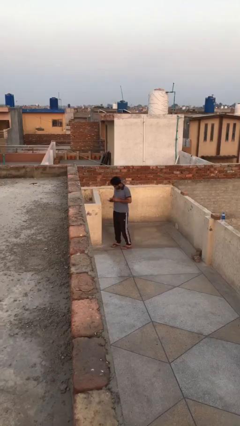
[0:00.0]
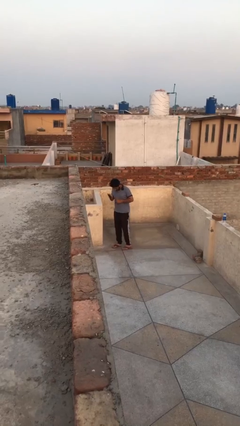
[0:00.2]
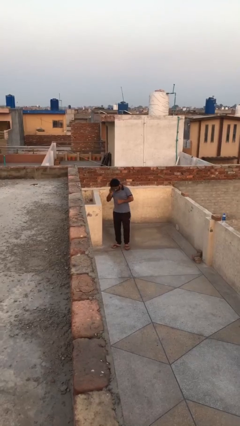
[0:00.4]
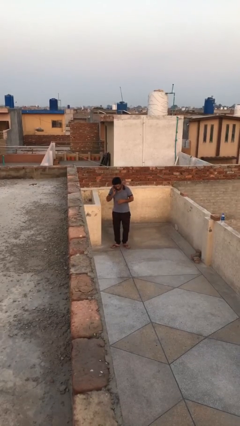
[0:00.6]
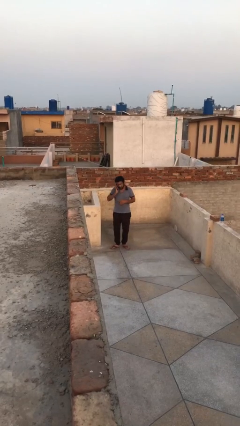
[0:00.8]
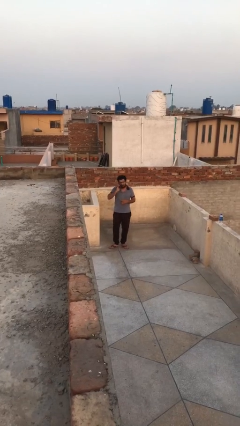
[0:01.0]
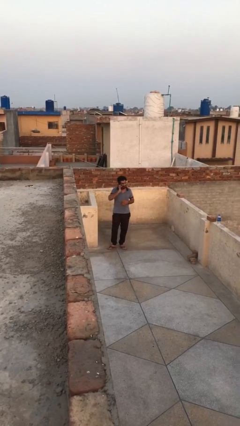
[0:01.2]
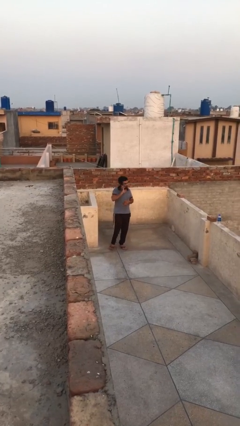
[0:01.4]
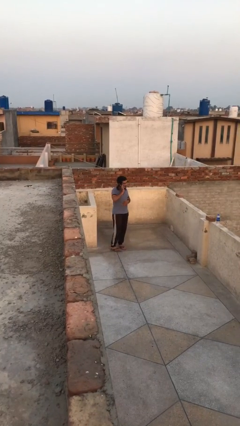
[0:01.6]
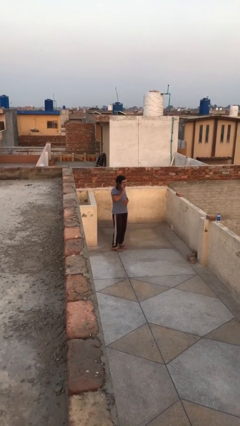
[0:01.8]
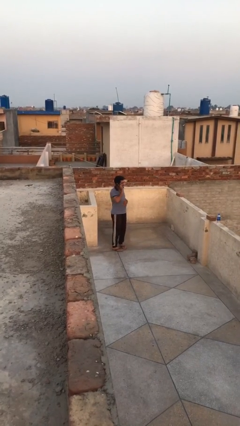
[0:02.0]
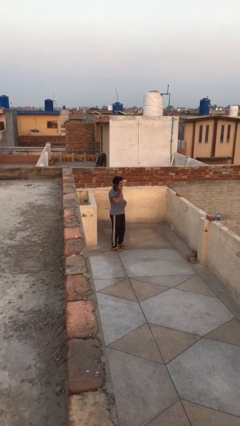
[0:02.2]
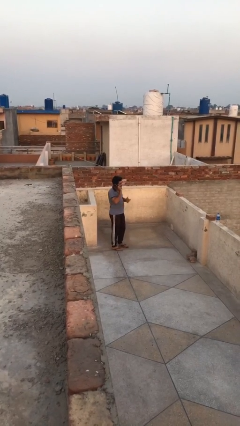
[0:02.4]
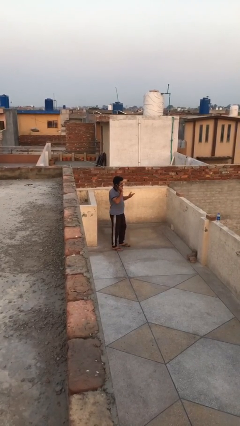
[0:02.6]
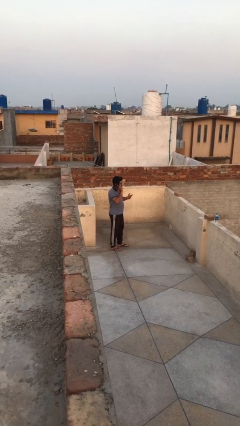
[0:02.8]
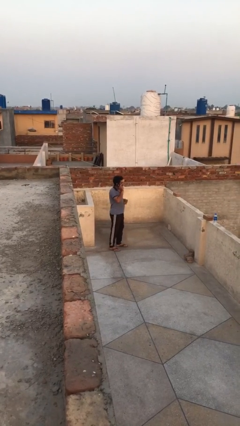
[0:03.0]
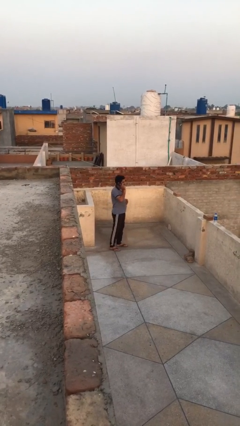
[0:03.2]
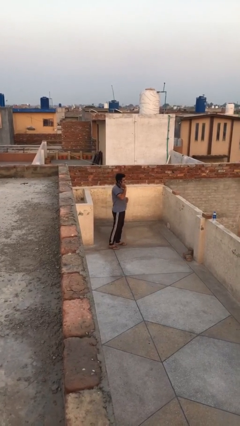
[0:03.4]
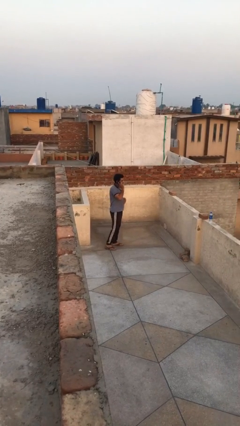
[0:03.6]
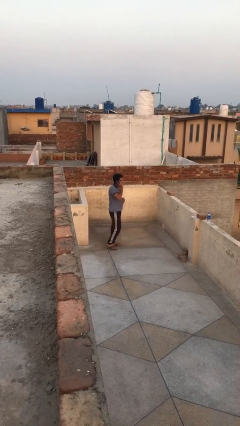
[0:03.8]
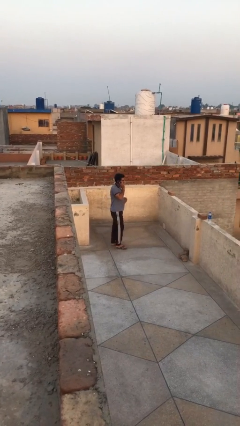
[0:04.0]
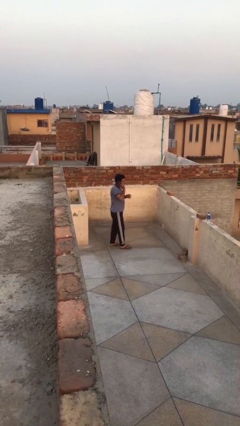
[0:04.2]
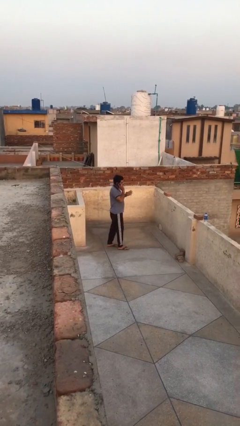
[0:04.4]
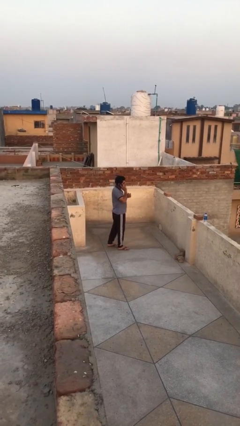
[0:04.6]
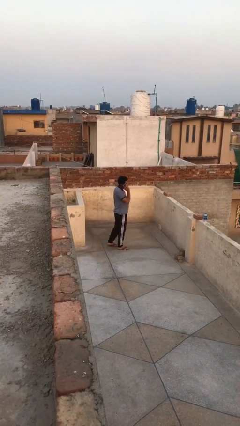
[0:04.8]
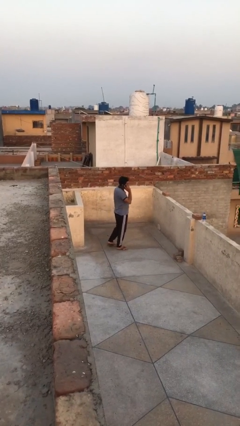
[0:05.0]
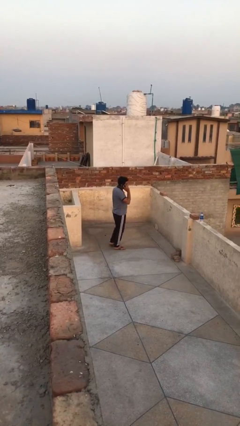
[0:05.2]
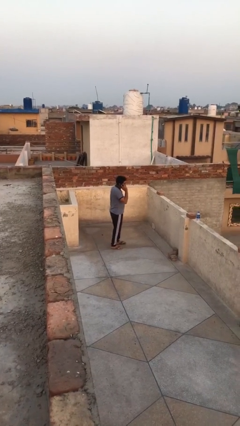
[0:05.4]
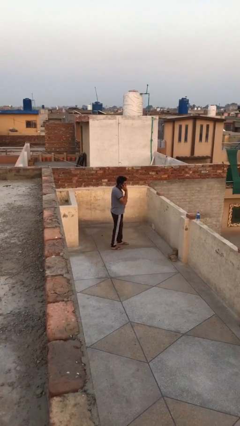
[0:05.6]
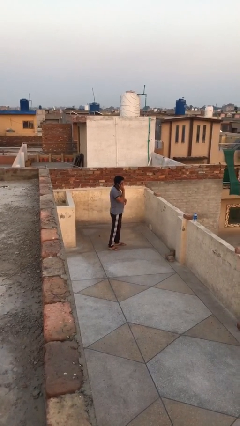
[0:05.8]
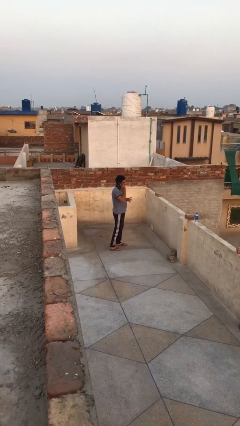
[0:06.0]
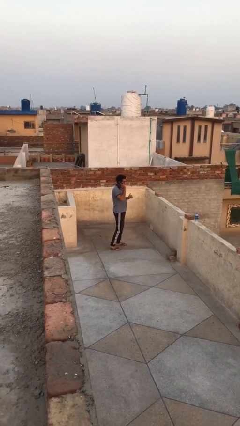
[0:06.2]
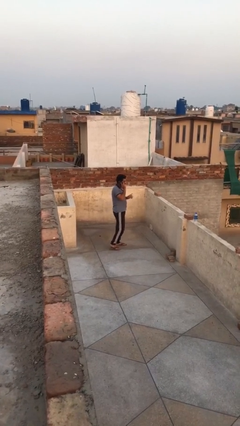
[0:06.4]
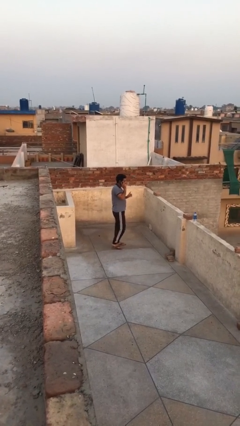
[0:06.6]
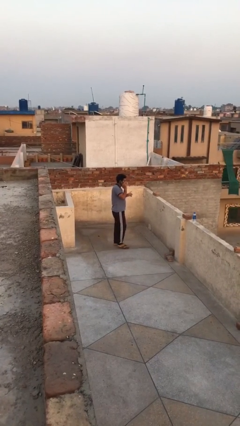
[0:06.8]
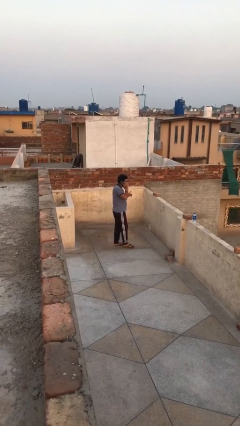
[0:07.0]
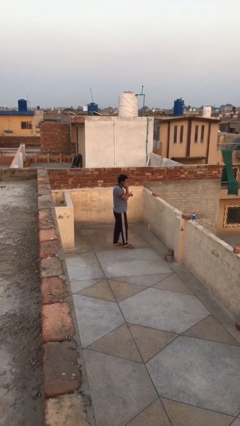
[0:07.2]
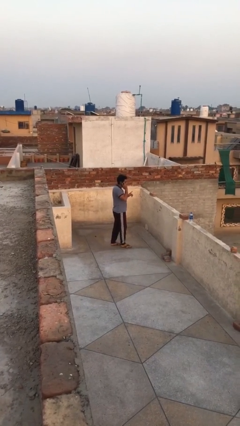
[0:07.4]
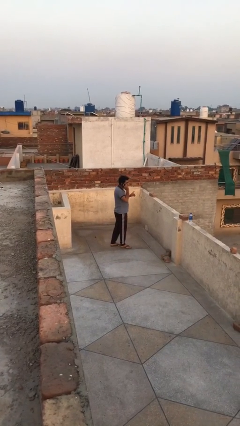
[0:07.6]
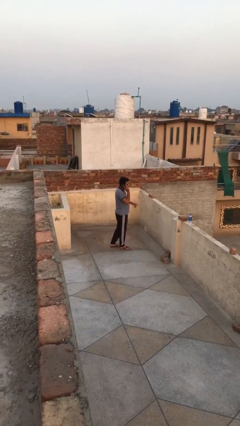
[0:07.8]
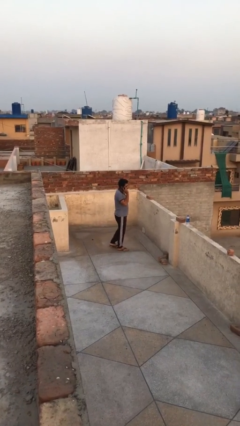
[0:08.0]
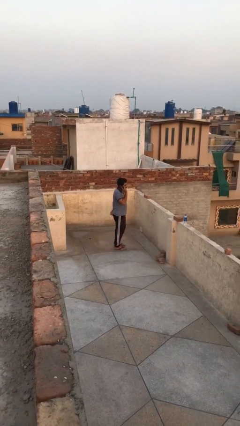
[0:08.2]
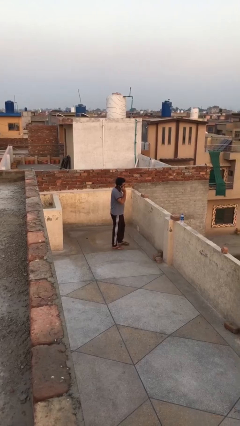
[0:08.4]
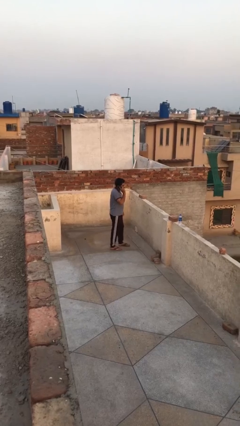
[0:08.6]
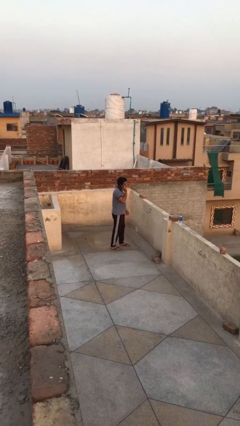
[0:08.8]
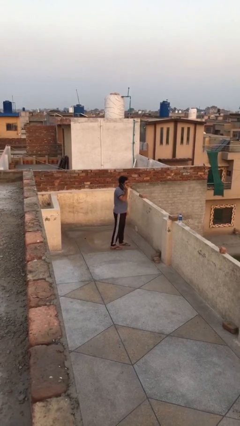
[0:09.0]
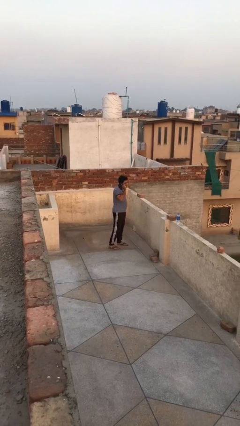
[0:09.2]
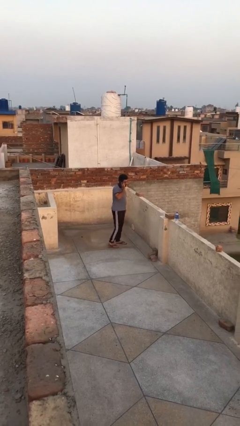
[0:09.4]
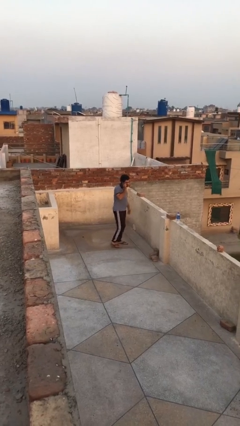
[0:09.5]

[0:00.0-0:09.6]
person talks on phone

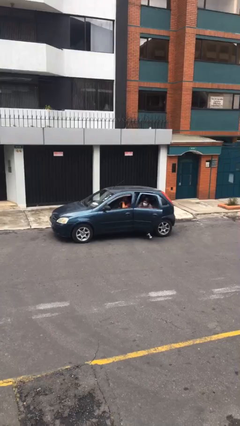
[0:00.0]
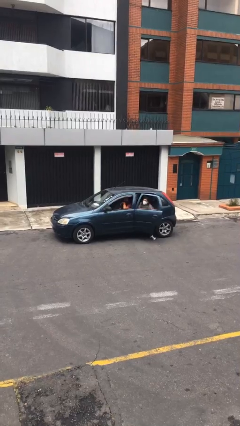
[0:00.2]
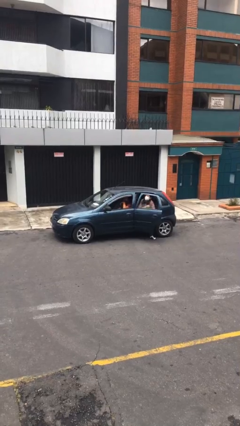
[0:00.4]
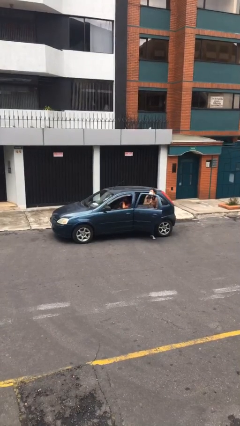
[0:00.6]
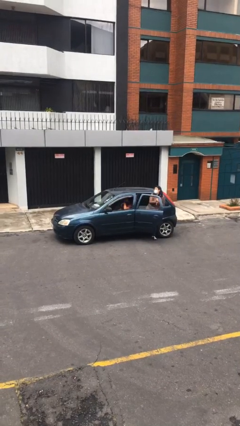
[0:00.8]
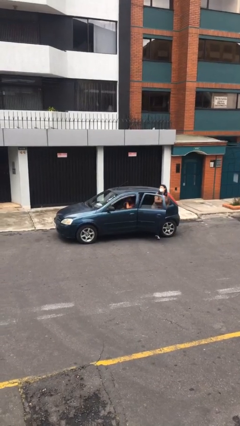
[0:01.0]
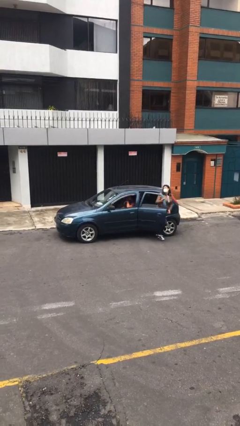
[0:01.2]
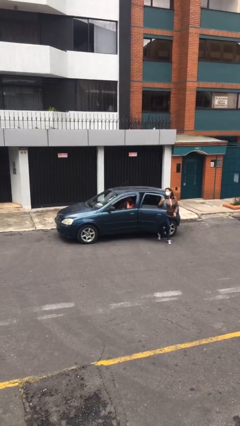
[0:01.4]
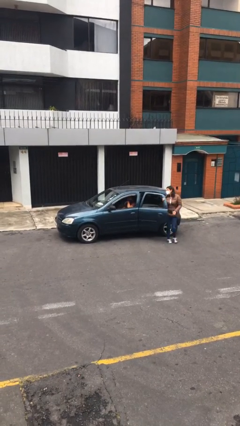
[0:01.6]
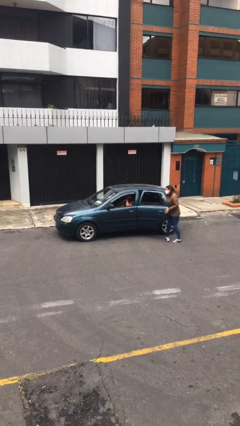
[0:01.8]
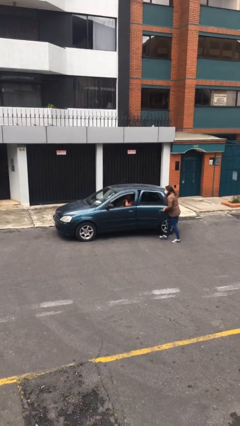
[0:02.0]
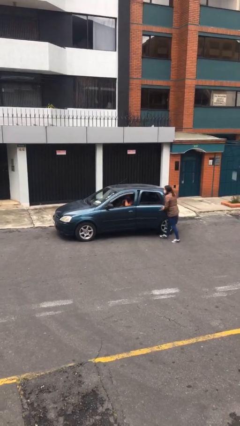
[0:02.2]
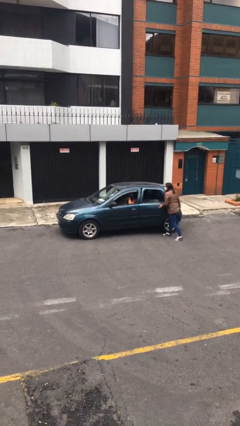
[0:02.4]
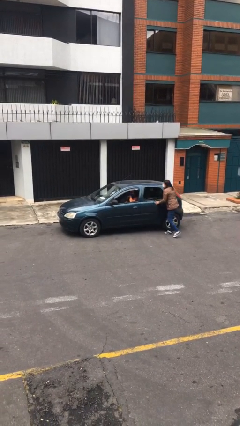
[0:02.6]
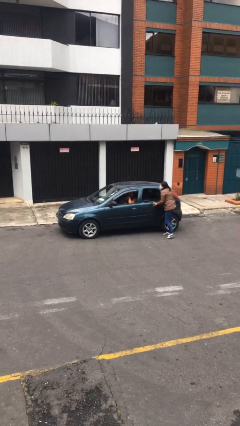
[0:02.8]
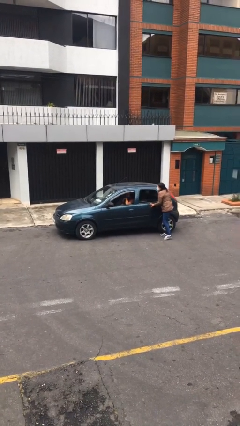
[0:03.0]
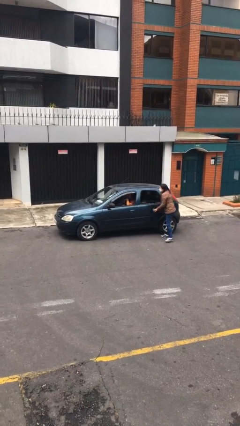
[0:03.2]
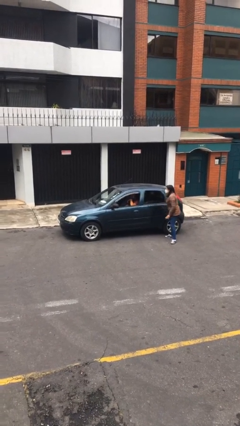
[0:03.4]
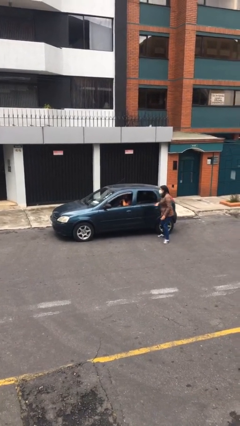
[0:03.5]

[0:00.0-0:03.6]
car drops off person

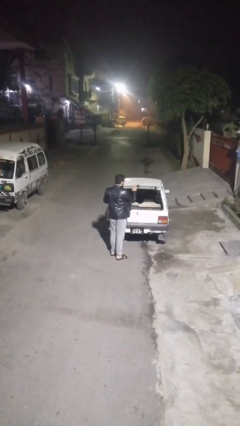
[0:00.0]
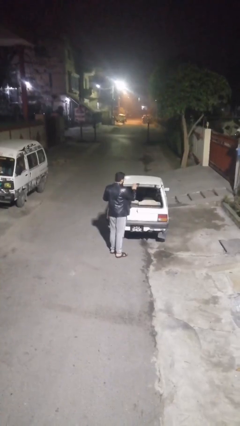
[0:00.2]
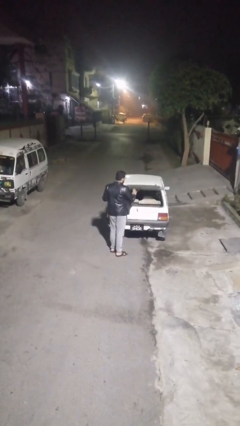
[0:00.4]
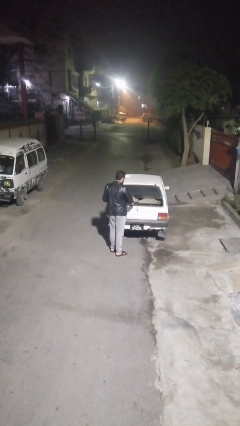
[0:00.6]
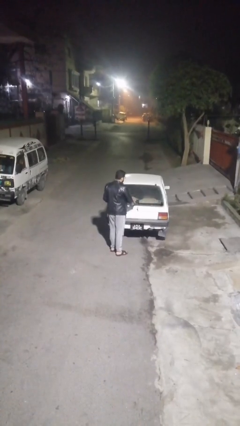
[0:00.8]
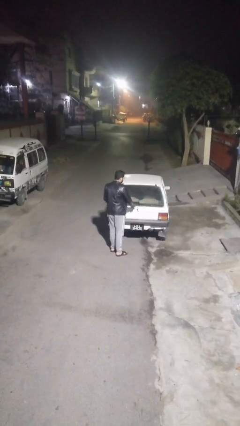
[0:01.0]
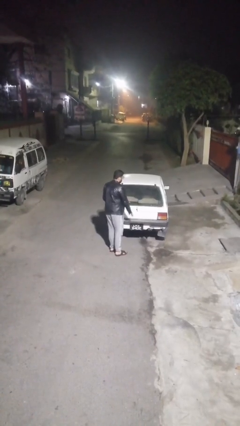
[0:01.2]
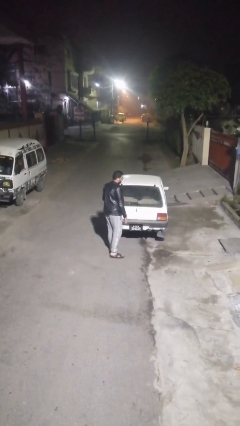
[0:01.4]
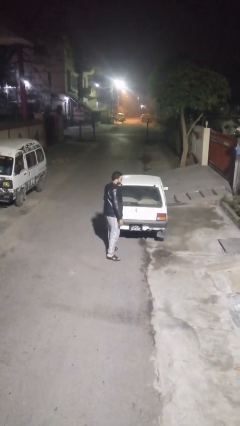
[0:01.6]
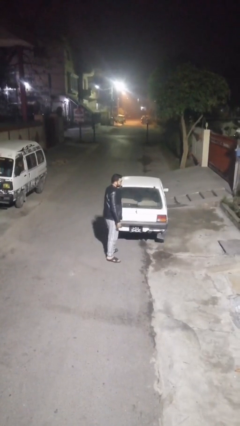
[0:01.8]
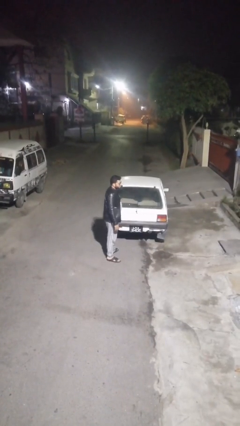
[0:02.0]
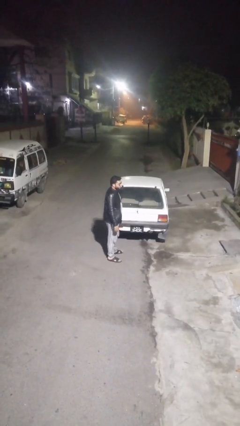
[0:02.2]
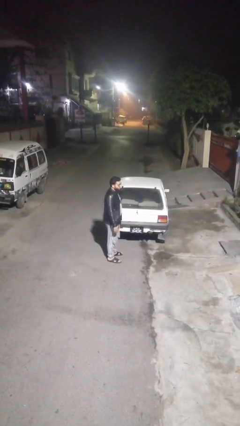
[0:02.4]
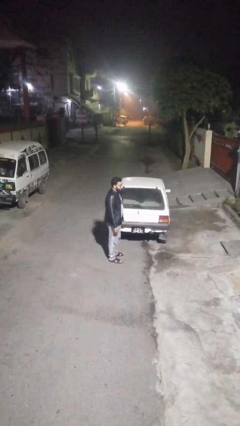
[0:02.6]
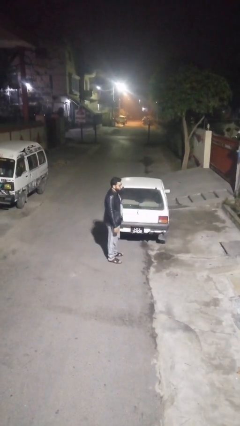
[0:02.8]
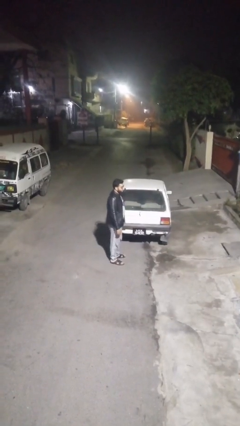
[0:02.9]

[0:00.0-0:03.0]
person closes car trunk

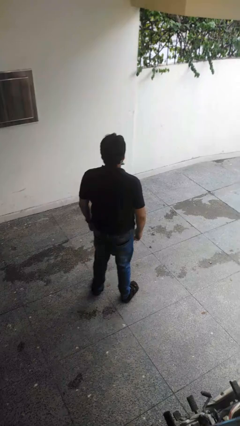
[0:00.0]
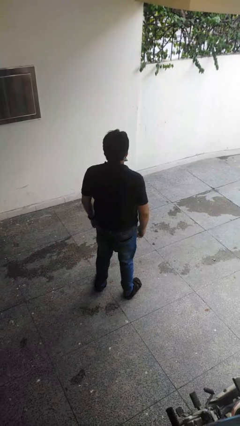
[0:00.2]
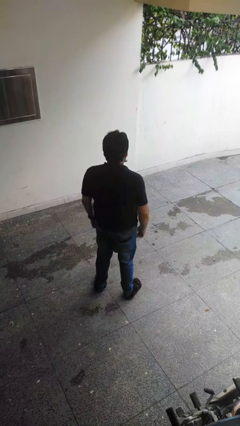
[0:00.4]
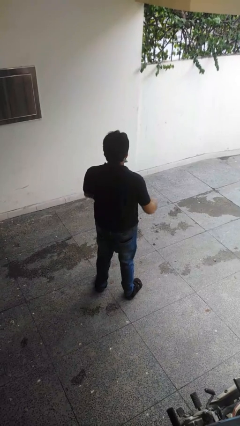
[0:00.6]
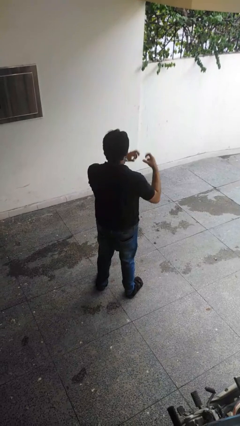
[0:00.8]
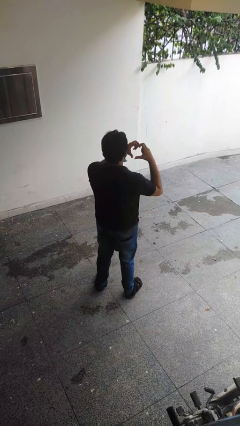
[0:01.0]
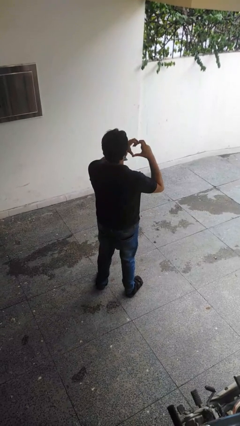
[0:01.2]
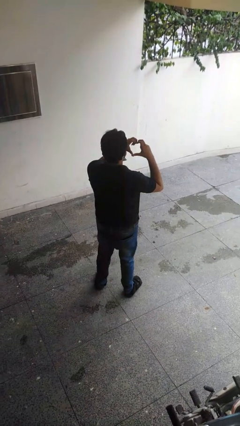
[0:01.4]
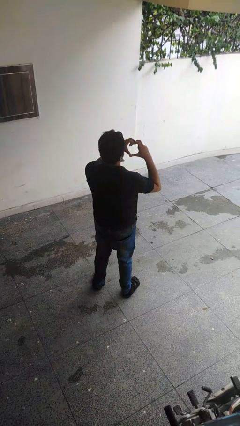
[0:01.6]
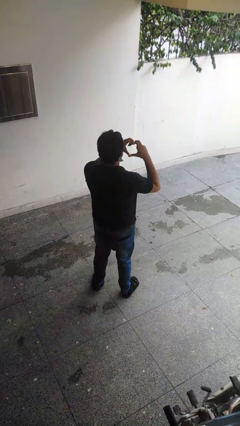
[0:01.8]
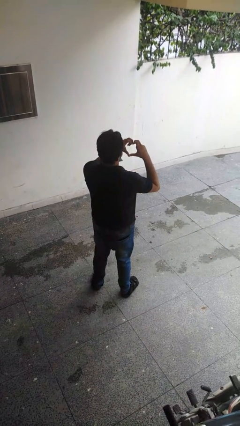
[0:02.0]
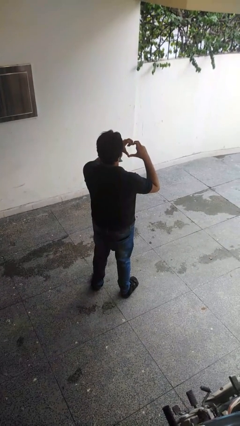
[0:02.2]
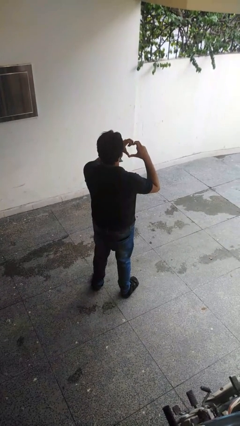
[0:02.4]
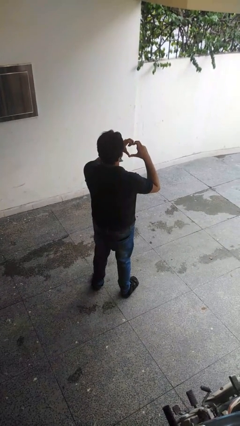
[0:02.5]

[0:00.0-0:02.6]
person gestures heart
